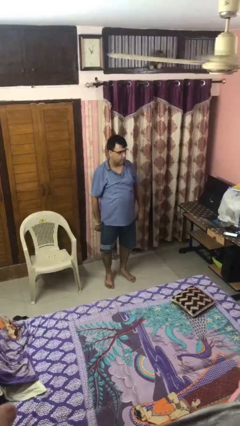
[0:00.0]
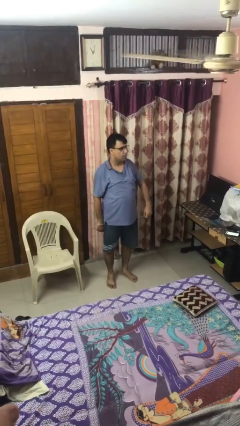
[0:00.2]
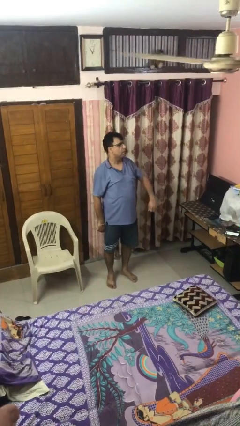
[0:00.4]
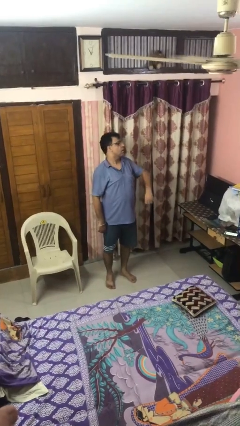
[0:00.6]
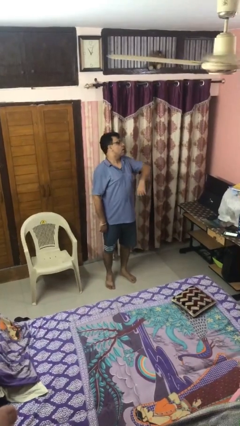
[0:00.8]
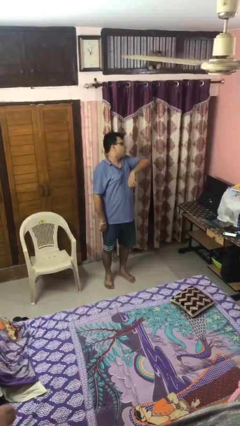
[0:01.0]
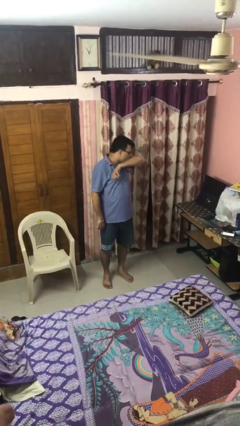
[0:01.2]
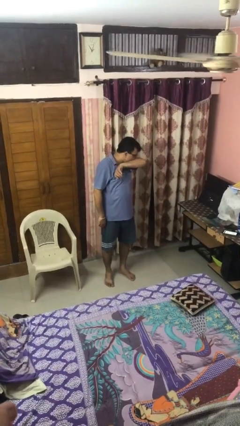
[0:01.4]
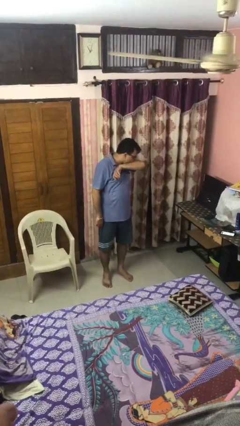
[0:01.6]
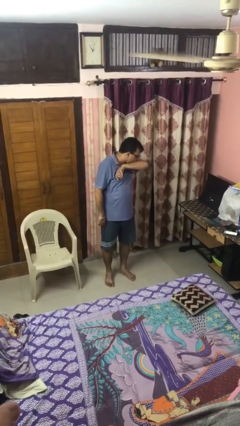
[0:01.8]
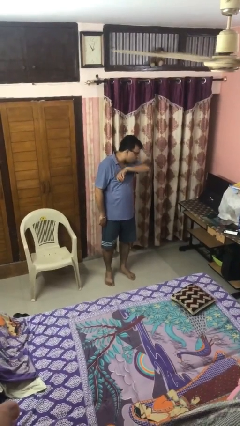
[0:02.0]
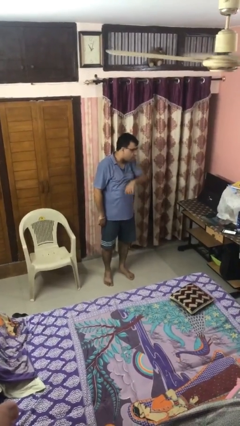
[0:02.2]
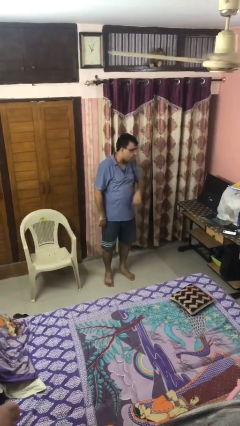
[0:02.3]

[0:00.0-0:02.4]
person sneezes into arm

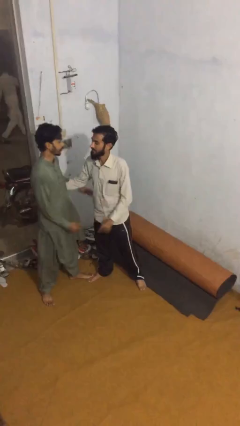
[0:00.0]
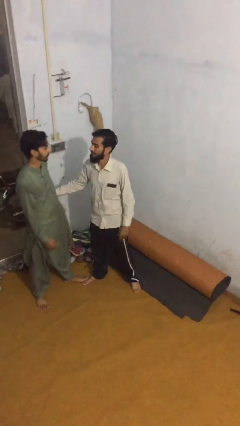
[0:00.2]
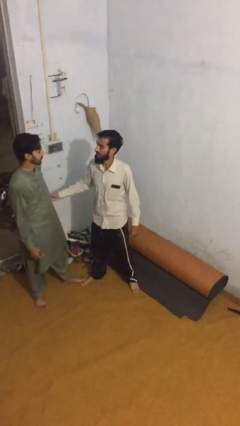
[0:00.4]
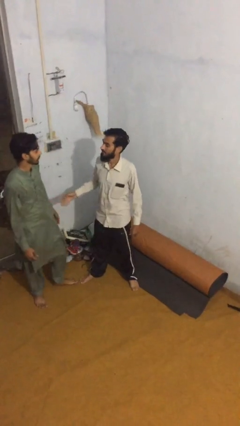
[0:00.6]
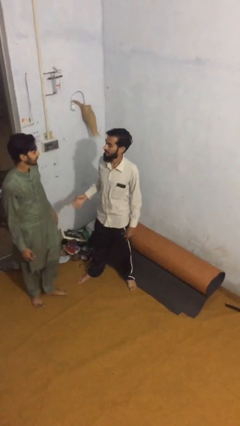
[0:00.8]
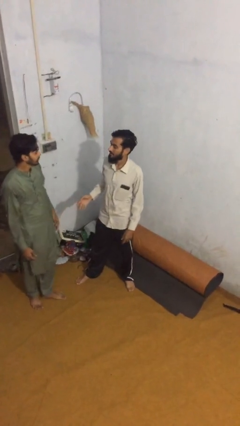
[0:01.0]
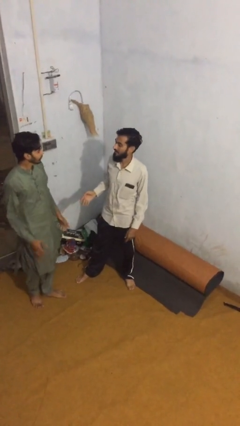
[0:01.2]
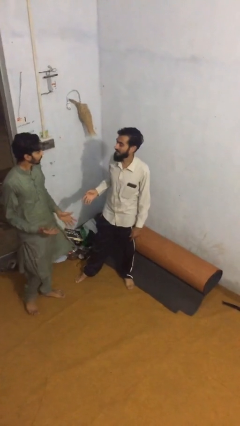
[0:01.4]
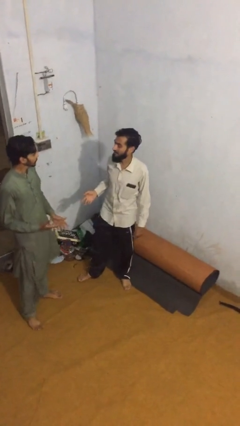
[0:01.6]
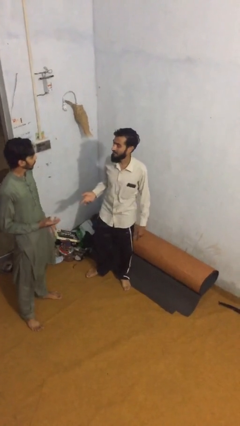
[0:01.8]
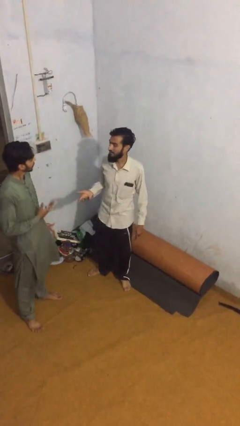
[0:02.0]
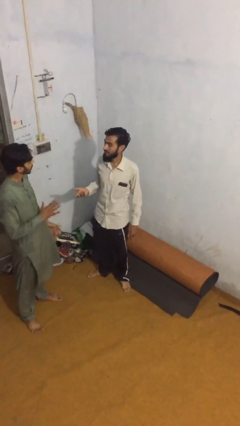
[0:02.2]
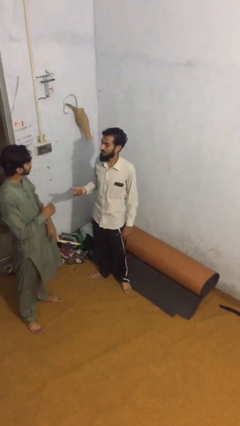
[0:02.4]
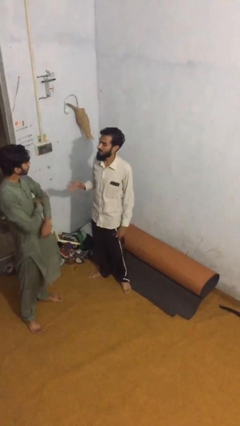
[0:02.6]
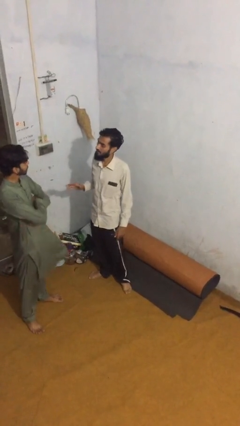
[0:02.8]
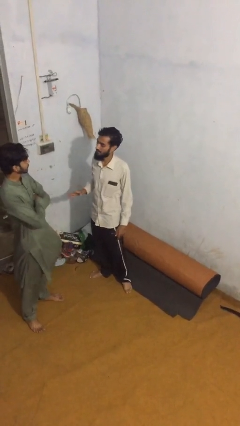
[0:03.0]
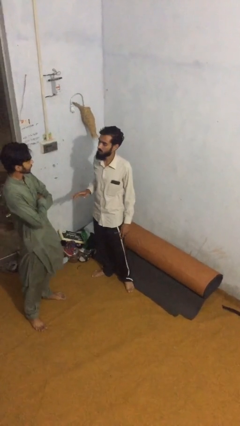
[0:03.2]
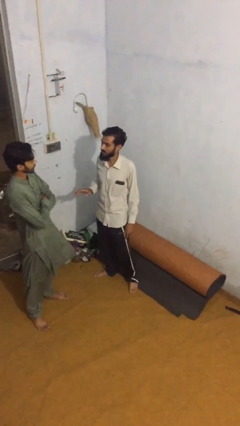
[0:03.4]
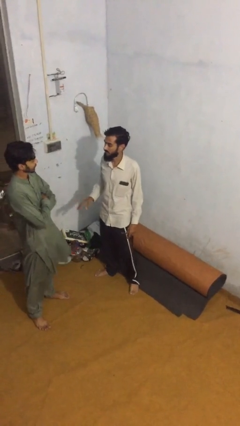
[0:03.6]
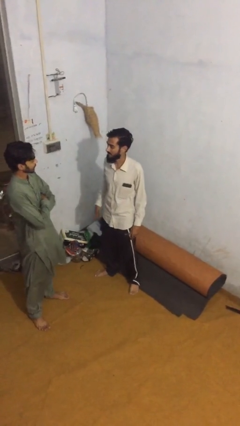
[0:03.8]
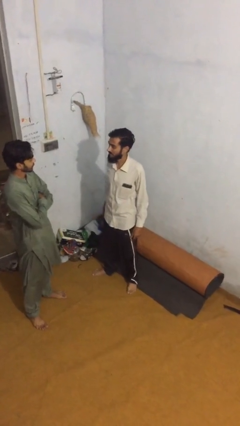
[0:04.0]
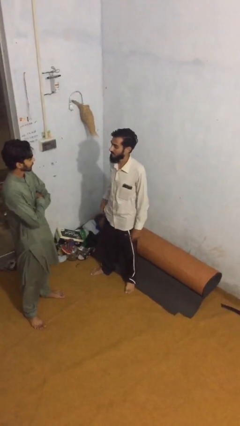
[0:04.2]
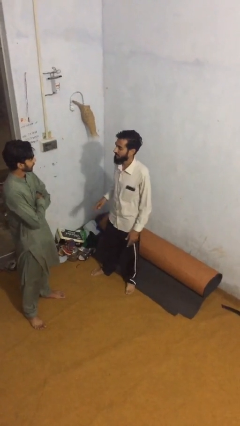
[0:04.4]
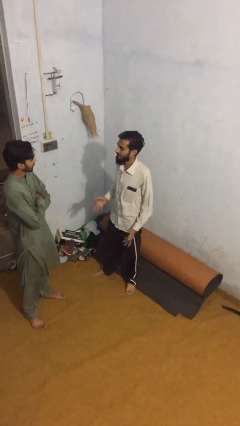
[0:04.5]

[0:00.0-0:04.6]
person talks to person

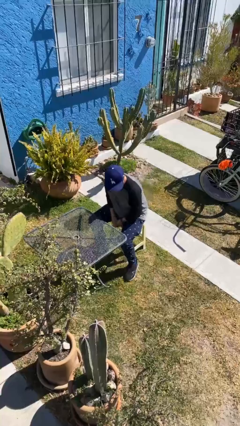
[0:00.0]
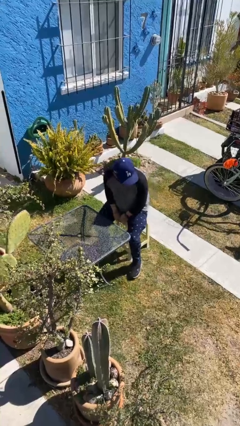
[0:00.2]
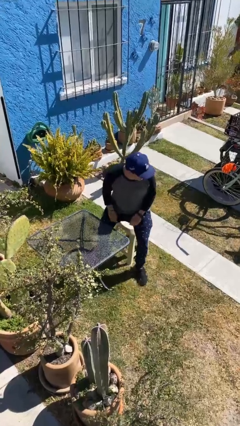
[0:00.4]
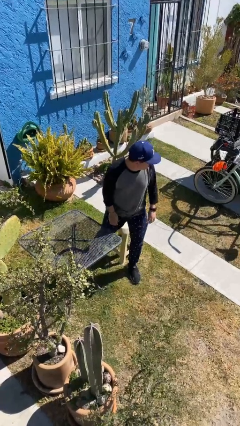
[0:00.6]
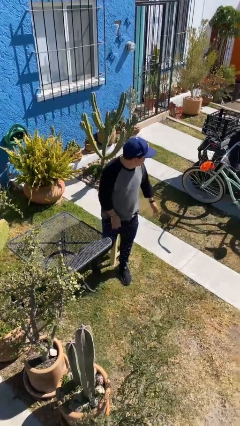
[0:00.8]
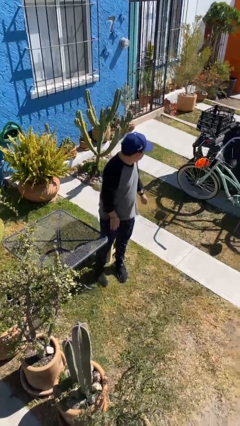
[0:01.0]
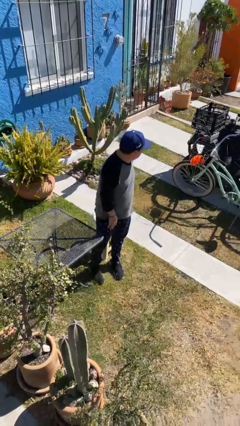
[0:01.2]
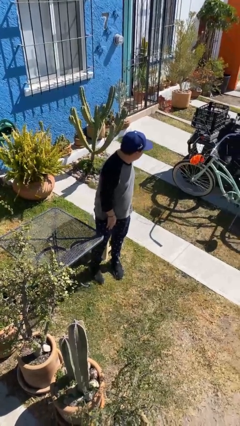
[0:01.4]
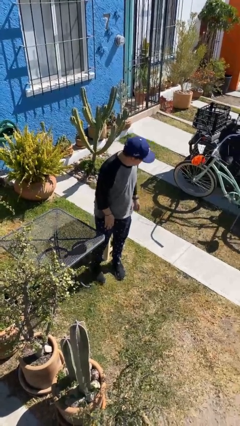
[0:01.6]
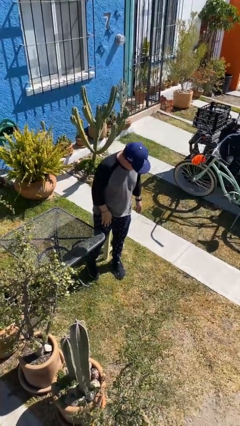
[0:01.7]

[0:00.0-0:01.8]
person stands up

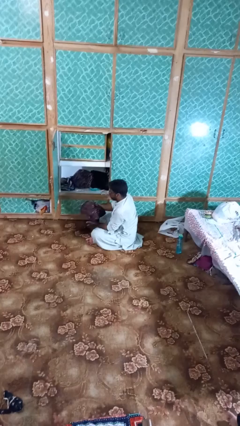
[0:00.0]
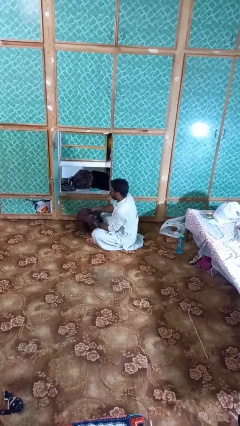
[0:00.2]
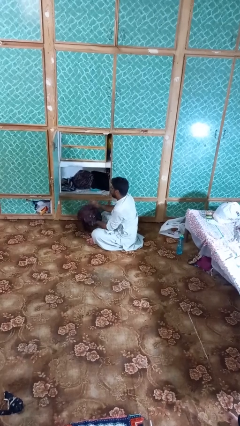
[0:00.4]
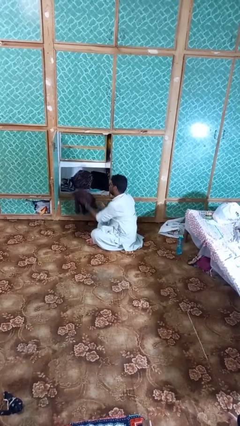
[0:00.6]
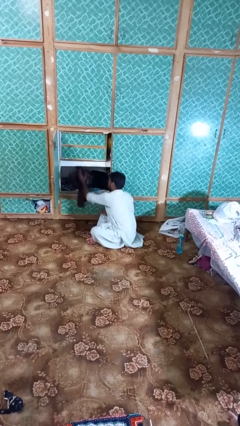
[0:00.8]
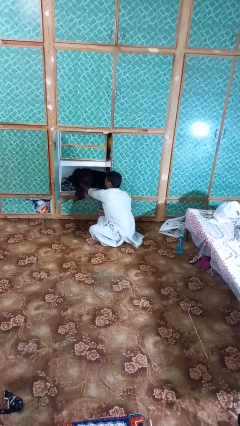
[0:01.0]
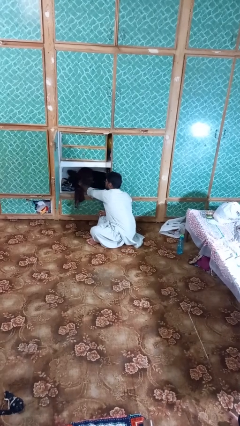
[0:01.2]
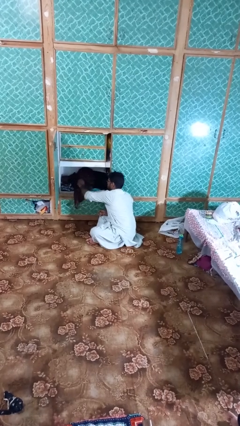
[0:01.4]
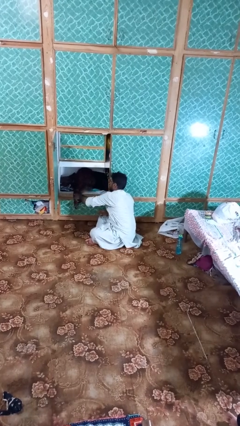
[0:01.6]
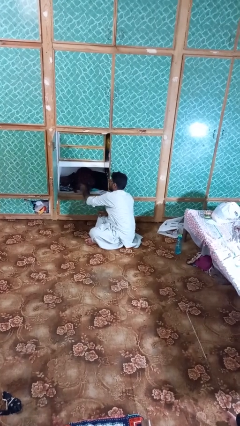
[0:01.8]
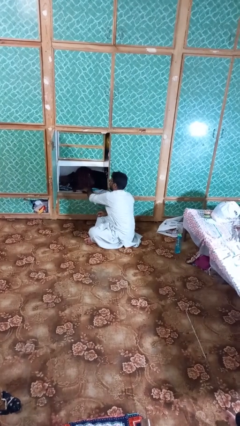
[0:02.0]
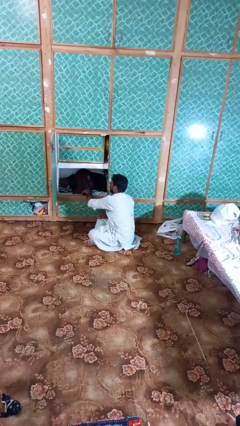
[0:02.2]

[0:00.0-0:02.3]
person puts clothes into dresser

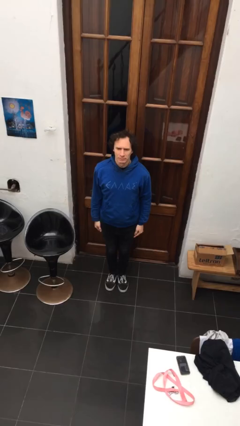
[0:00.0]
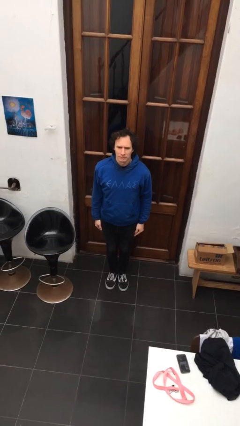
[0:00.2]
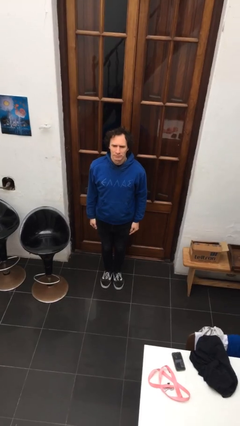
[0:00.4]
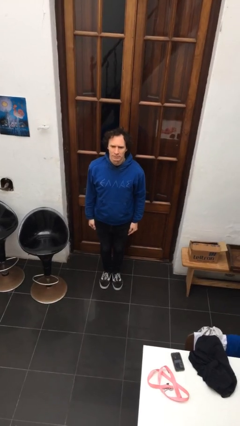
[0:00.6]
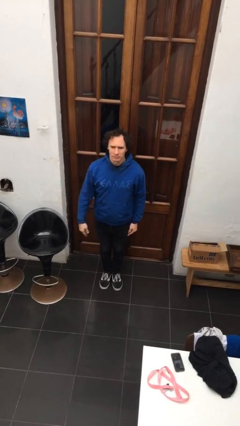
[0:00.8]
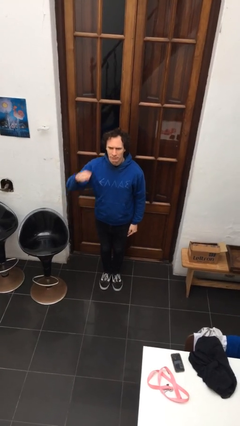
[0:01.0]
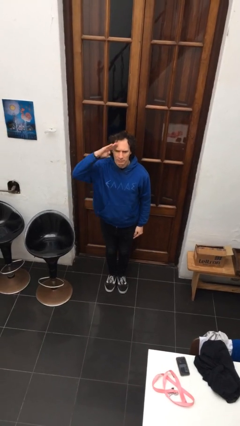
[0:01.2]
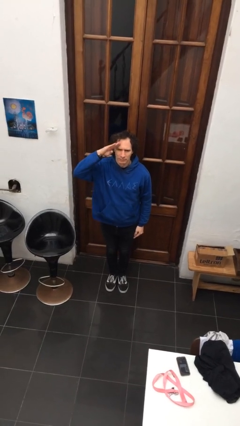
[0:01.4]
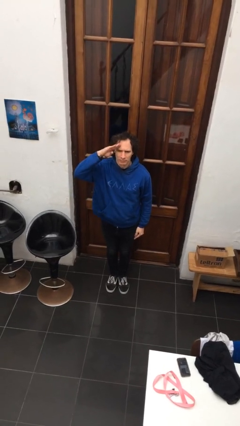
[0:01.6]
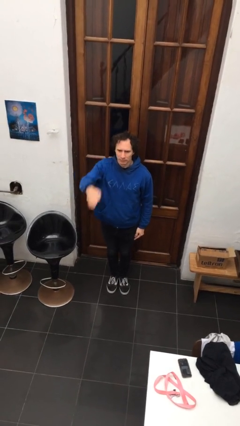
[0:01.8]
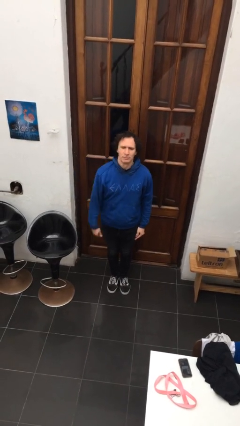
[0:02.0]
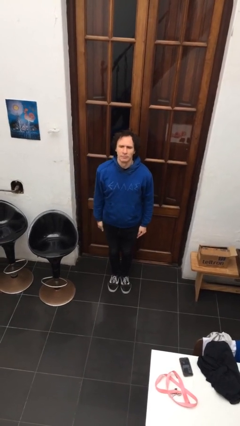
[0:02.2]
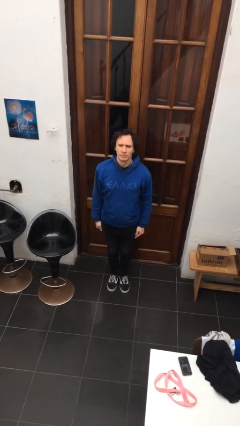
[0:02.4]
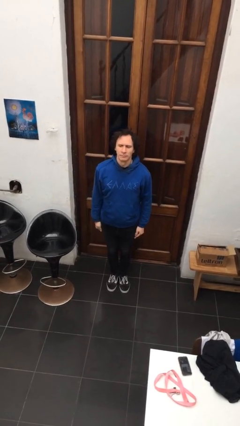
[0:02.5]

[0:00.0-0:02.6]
person salutes

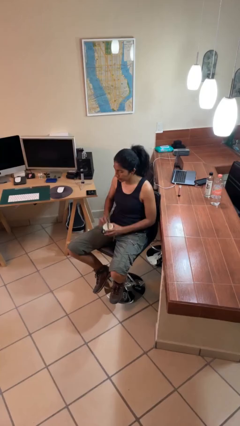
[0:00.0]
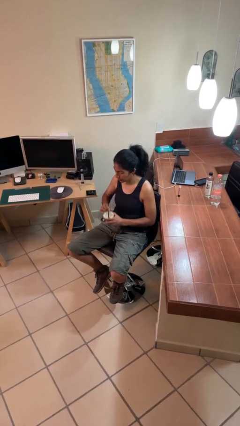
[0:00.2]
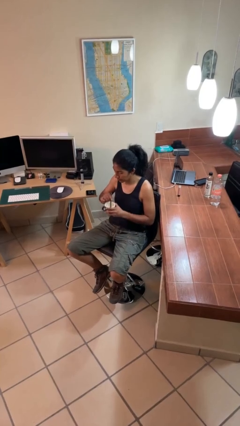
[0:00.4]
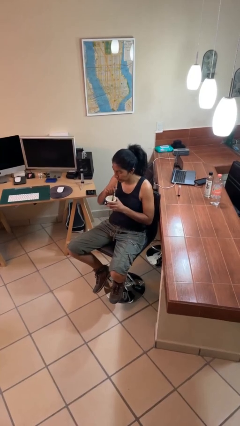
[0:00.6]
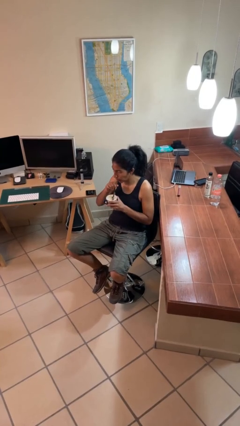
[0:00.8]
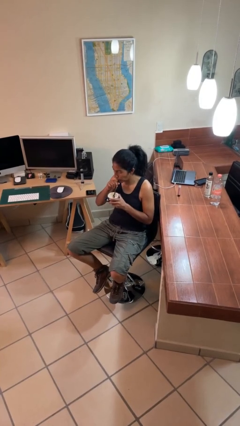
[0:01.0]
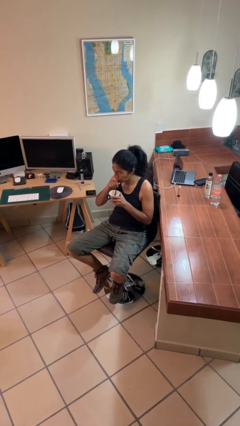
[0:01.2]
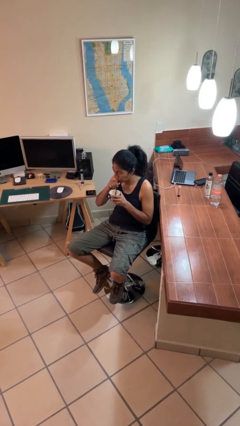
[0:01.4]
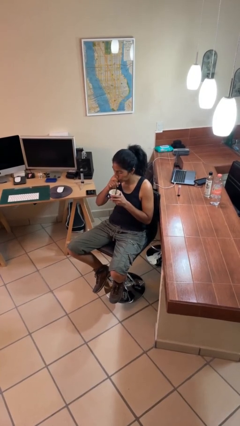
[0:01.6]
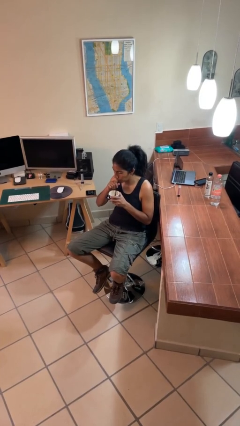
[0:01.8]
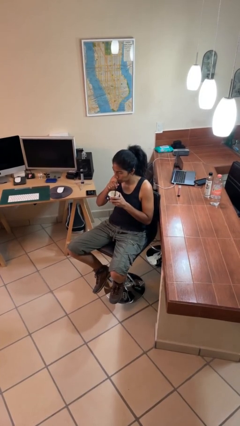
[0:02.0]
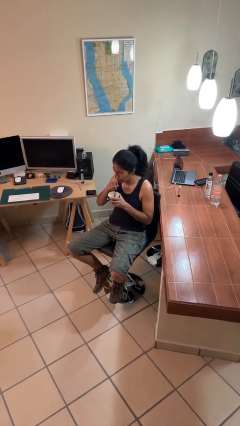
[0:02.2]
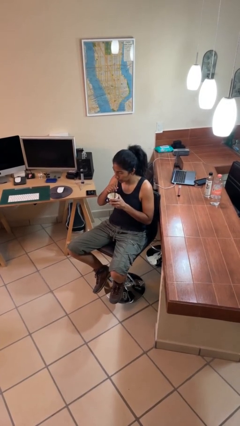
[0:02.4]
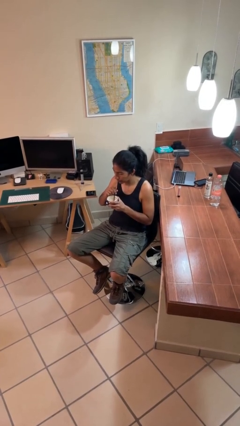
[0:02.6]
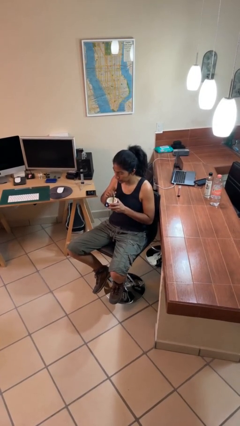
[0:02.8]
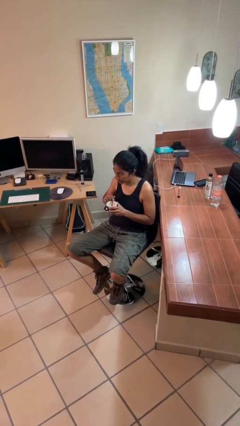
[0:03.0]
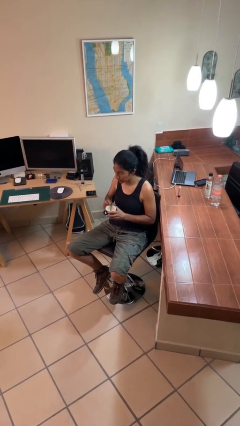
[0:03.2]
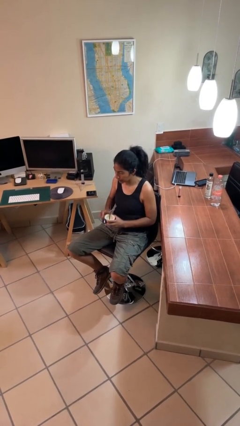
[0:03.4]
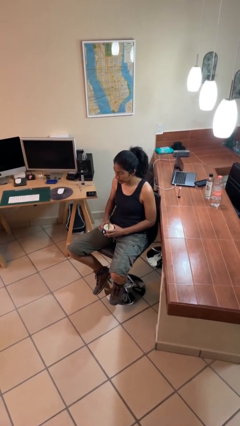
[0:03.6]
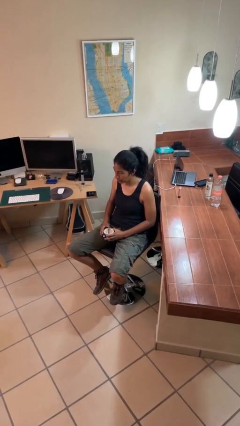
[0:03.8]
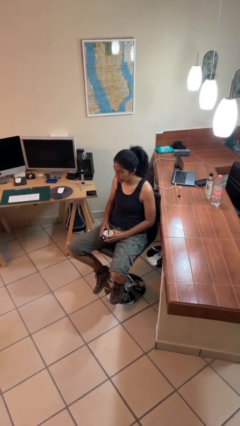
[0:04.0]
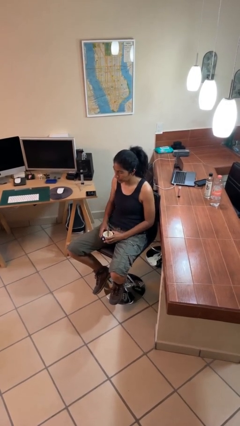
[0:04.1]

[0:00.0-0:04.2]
person drinks from straw
